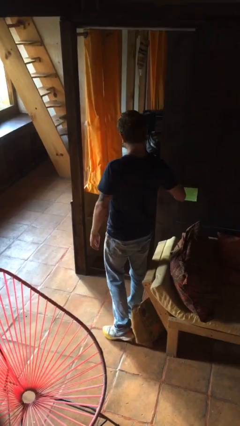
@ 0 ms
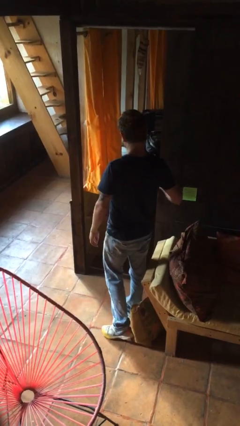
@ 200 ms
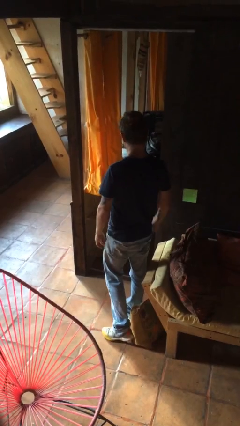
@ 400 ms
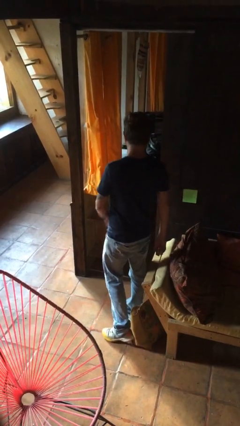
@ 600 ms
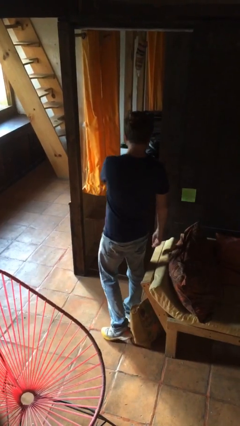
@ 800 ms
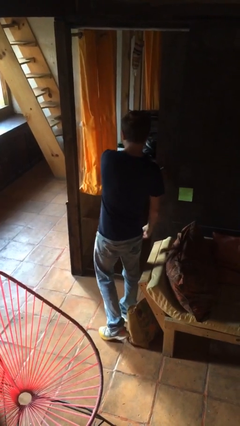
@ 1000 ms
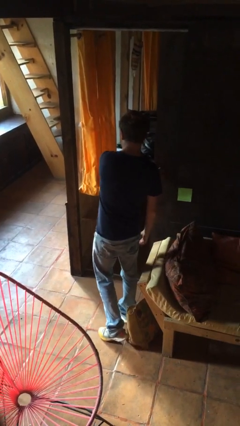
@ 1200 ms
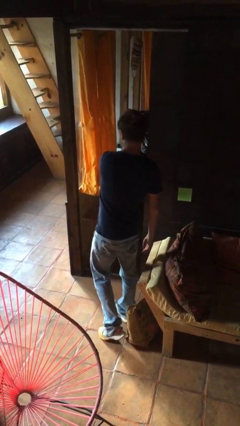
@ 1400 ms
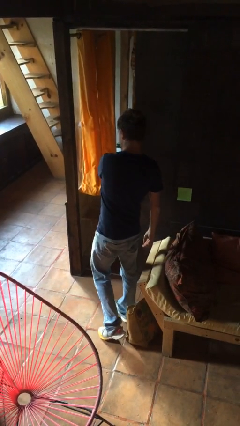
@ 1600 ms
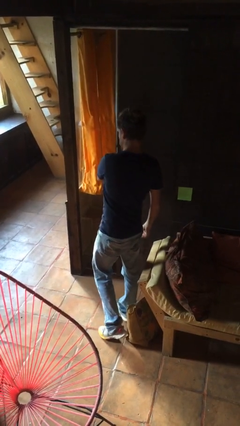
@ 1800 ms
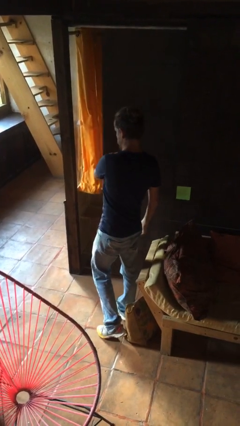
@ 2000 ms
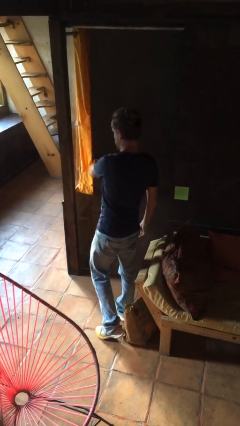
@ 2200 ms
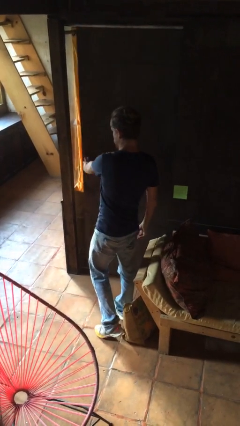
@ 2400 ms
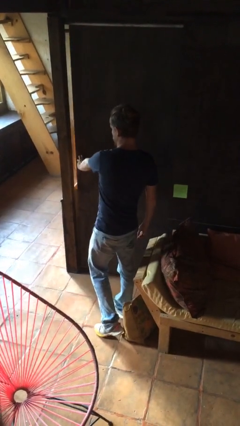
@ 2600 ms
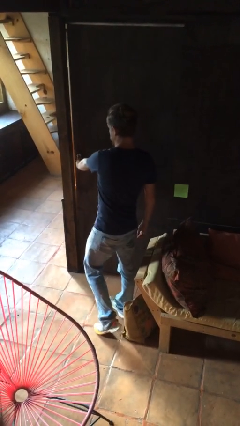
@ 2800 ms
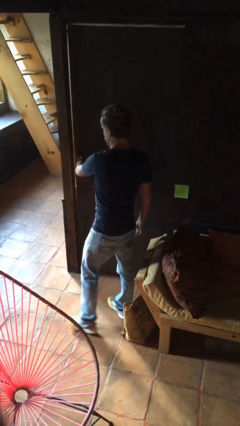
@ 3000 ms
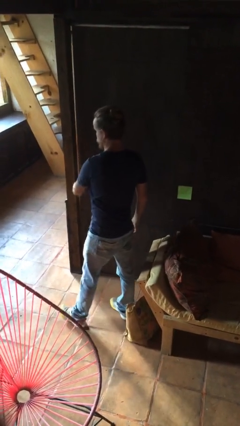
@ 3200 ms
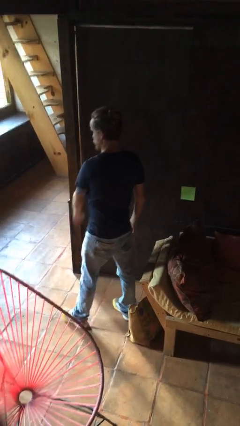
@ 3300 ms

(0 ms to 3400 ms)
person closes sliding door

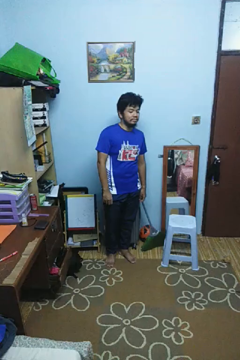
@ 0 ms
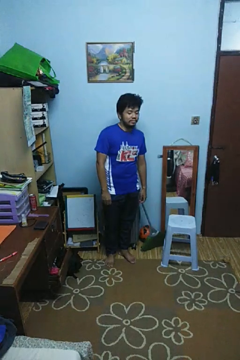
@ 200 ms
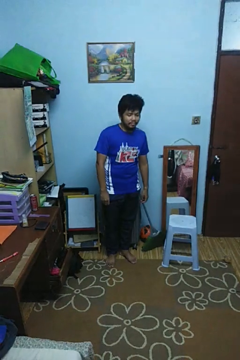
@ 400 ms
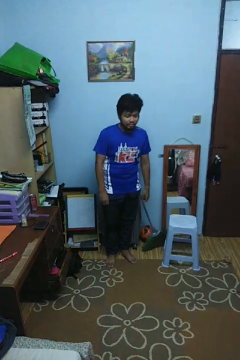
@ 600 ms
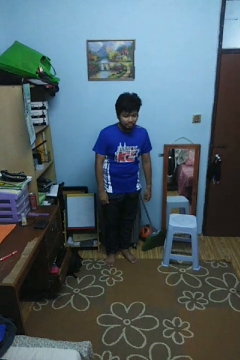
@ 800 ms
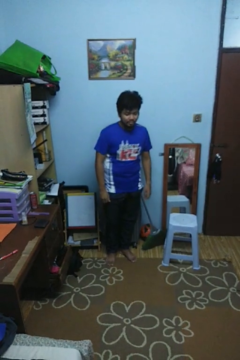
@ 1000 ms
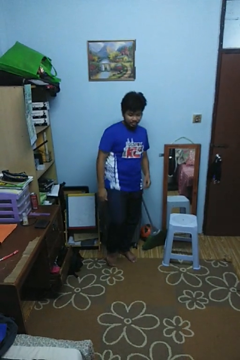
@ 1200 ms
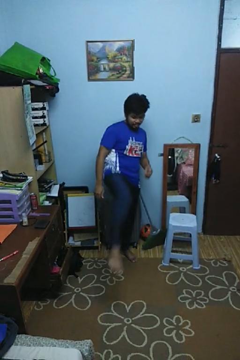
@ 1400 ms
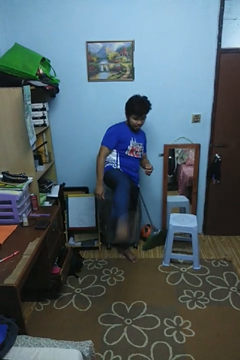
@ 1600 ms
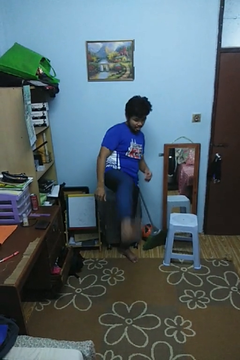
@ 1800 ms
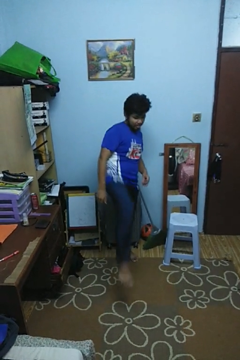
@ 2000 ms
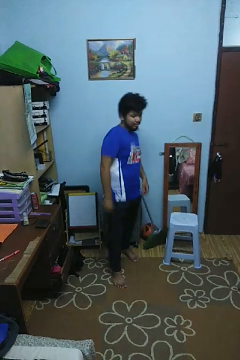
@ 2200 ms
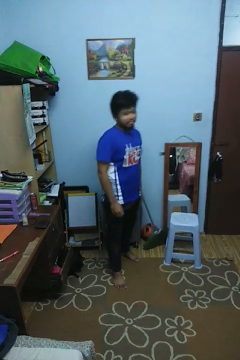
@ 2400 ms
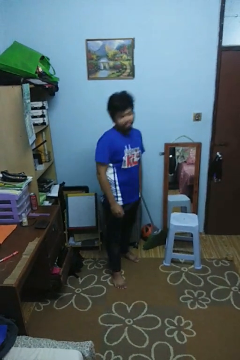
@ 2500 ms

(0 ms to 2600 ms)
person karate kicks

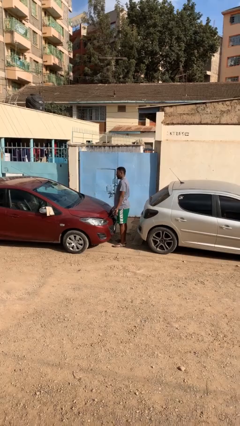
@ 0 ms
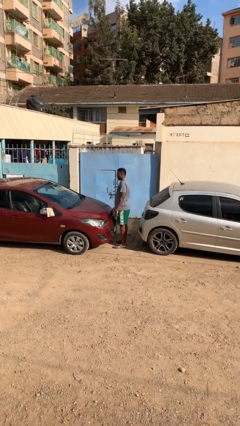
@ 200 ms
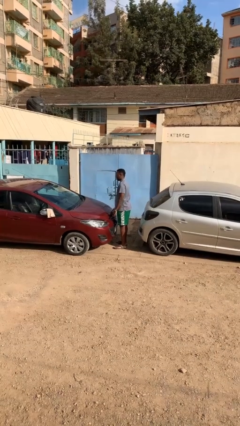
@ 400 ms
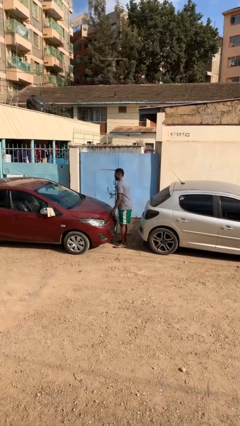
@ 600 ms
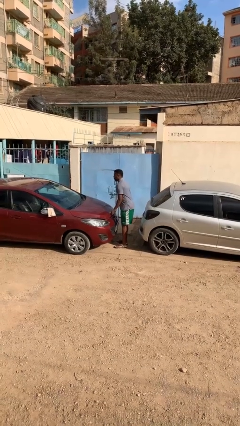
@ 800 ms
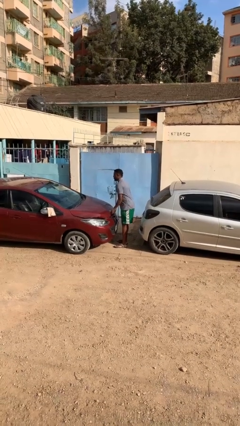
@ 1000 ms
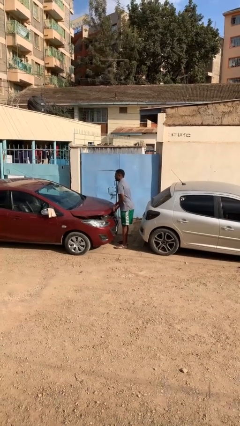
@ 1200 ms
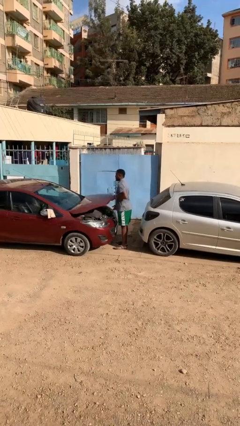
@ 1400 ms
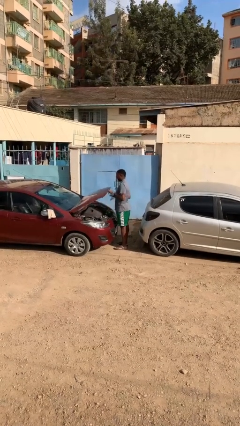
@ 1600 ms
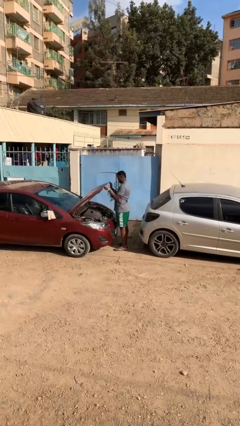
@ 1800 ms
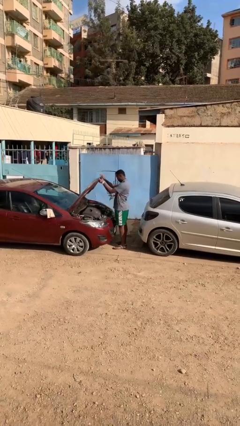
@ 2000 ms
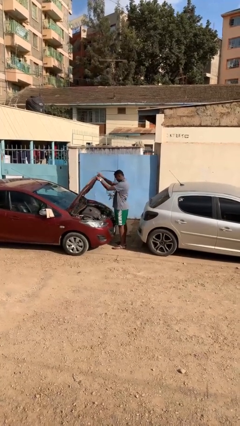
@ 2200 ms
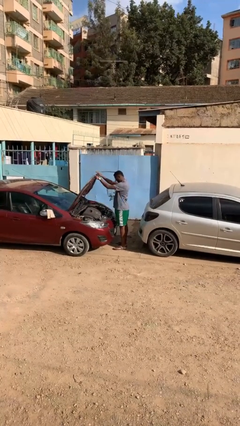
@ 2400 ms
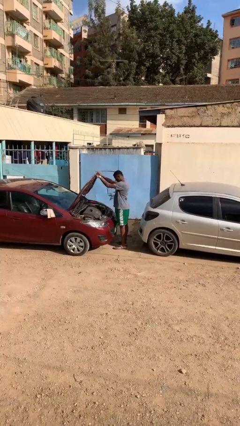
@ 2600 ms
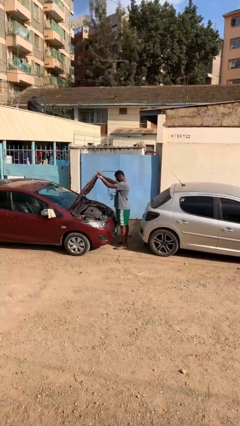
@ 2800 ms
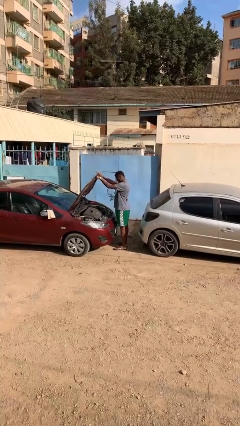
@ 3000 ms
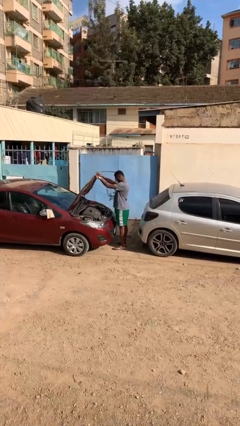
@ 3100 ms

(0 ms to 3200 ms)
person opens car hood

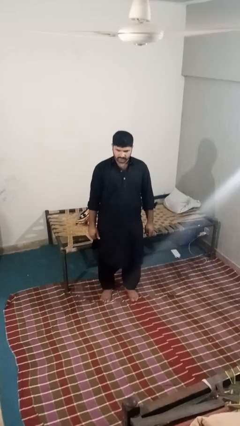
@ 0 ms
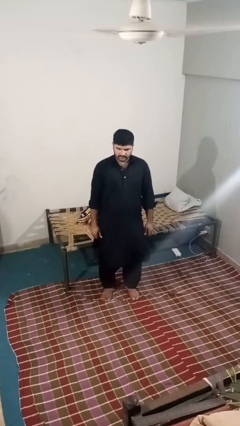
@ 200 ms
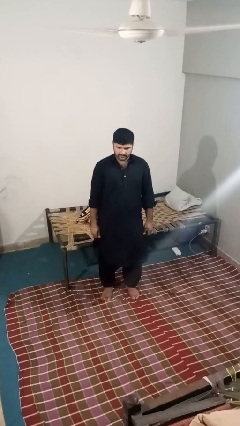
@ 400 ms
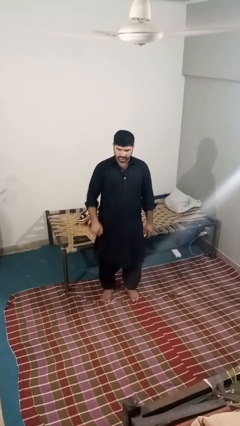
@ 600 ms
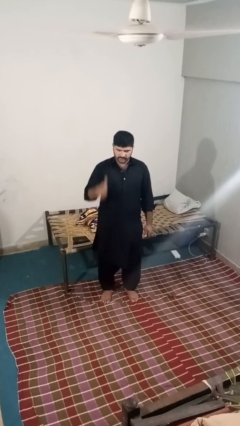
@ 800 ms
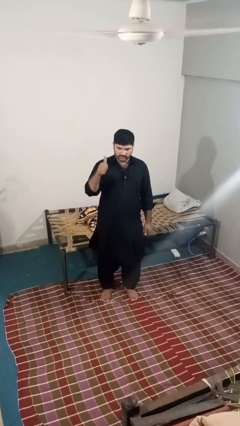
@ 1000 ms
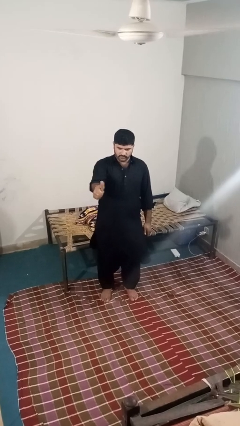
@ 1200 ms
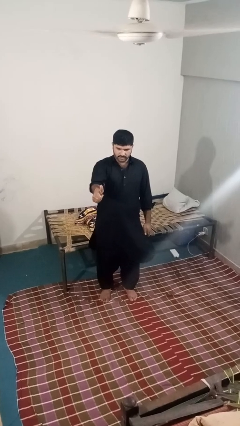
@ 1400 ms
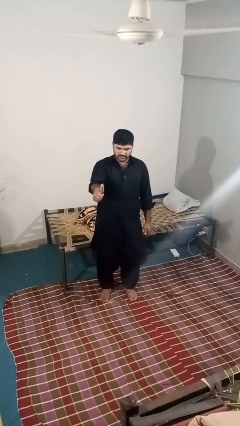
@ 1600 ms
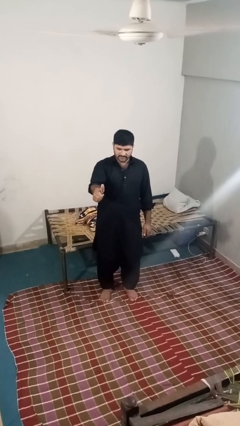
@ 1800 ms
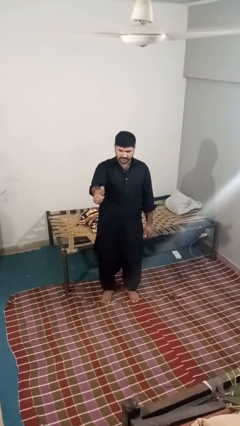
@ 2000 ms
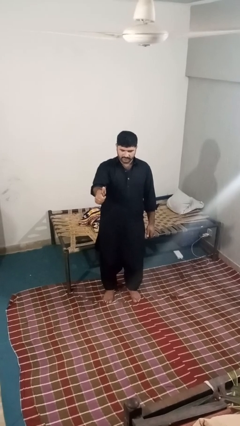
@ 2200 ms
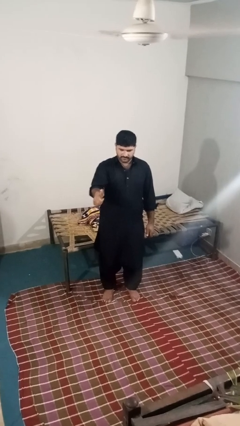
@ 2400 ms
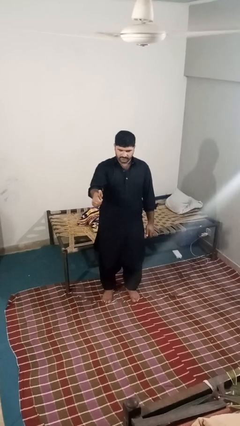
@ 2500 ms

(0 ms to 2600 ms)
person gestures thumbs up

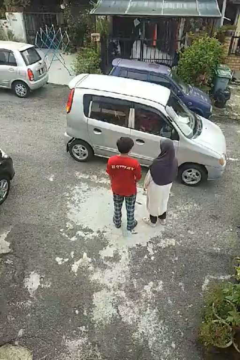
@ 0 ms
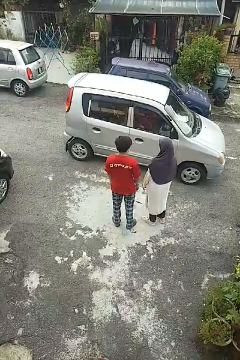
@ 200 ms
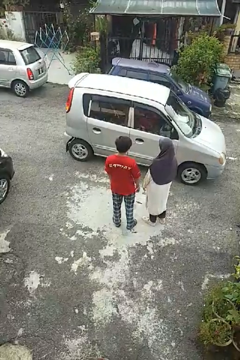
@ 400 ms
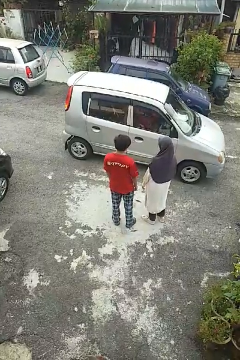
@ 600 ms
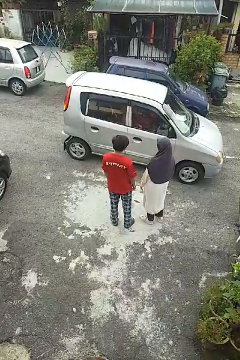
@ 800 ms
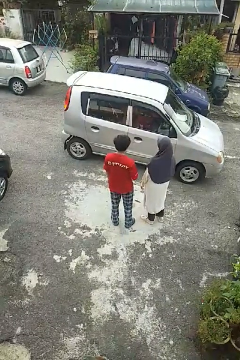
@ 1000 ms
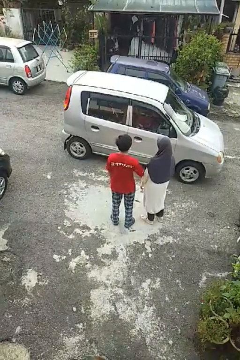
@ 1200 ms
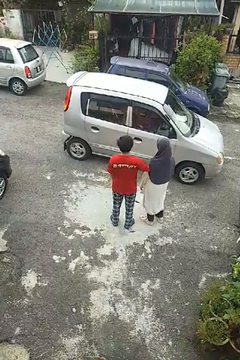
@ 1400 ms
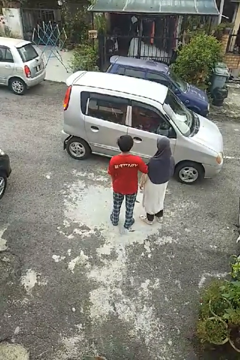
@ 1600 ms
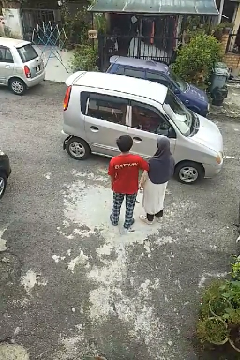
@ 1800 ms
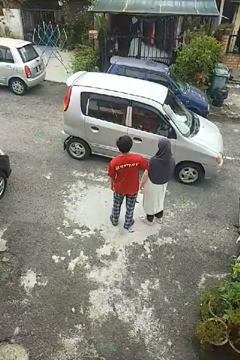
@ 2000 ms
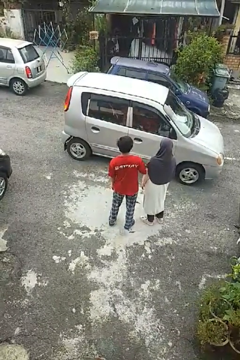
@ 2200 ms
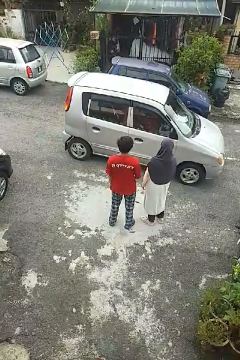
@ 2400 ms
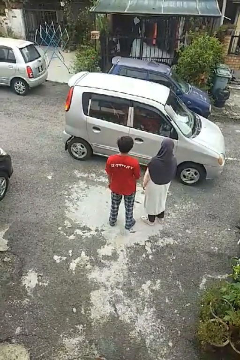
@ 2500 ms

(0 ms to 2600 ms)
person nudges person with elbow

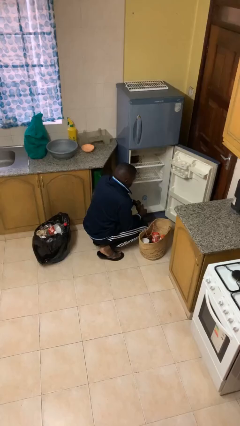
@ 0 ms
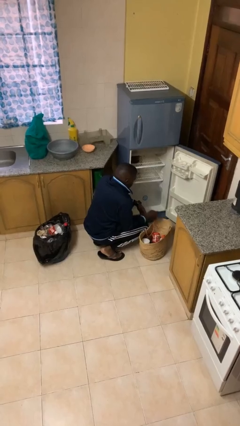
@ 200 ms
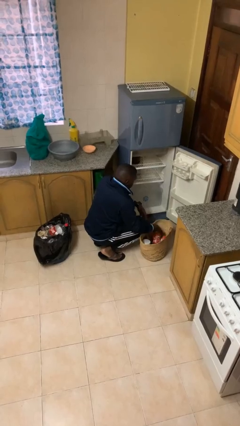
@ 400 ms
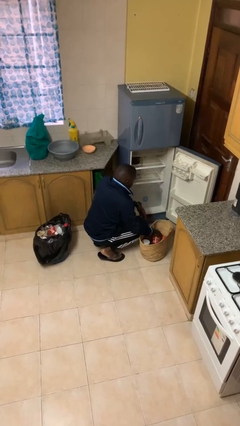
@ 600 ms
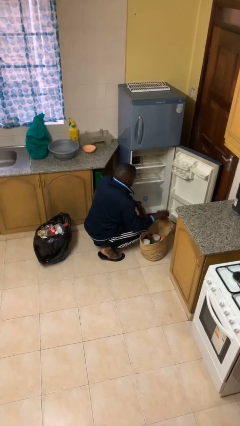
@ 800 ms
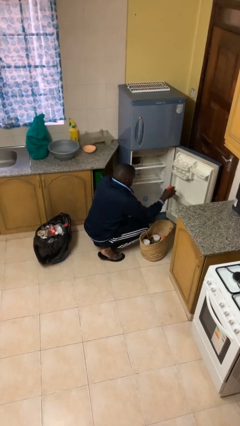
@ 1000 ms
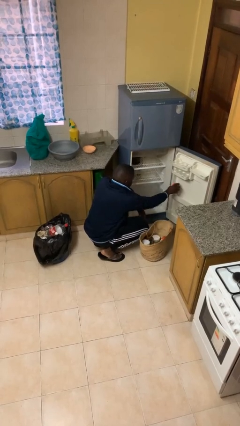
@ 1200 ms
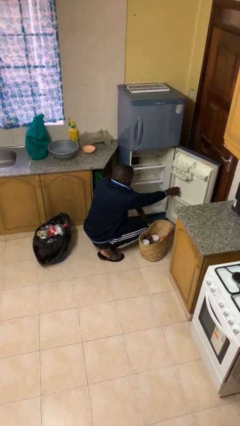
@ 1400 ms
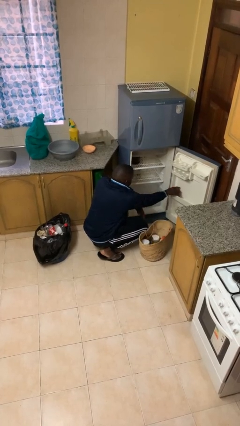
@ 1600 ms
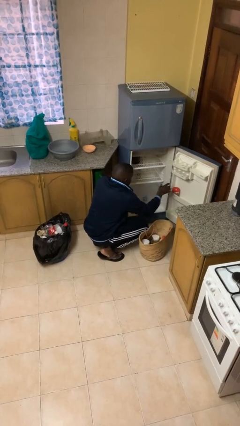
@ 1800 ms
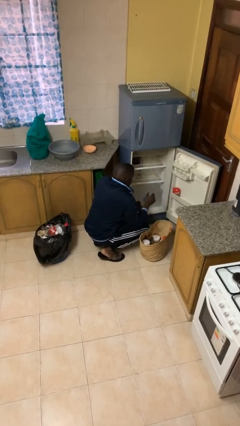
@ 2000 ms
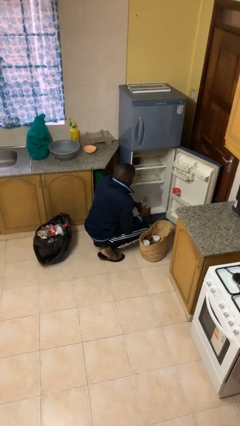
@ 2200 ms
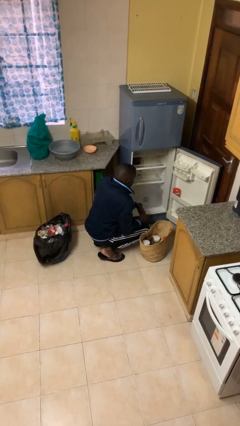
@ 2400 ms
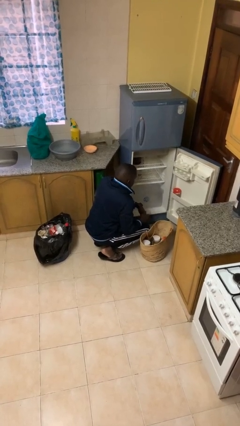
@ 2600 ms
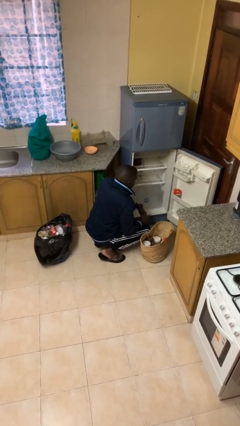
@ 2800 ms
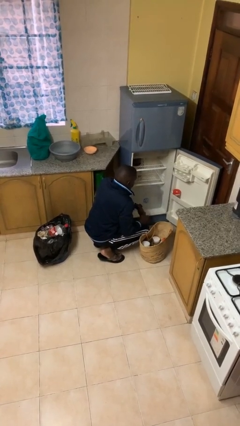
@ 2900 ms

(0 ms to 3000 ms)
person loads groceries into refrigerator

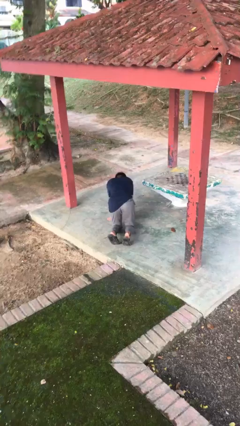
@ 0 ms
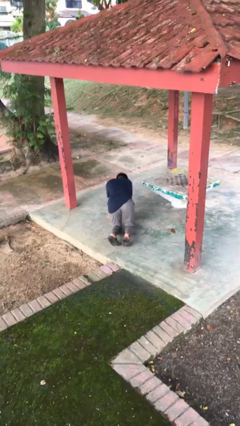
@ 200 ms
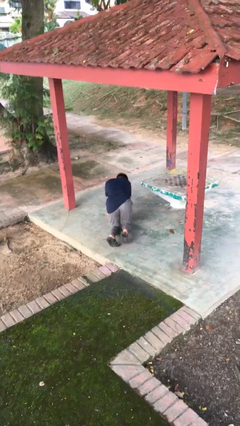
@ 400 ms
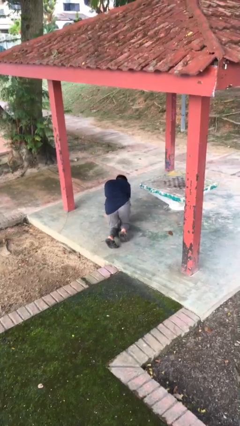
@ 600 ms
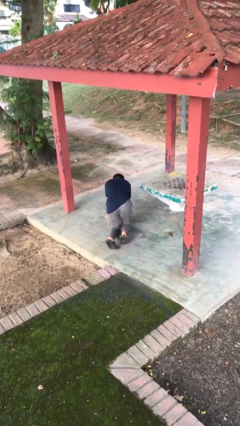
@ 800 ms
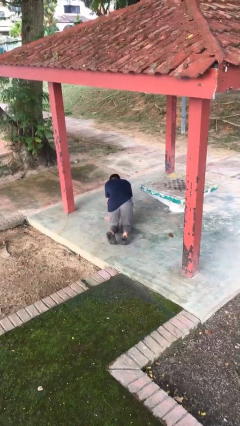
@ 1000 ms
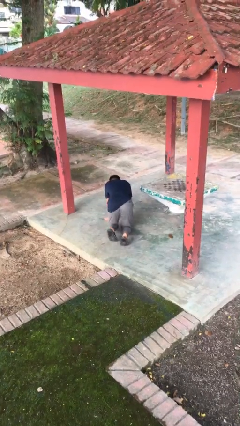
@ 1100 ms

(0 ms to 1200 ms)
person crawls
